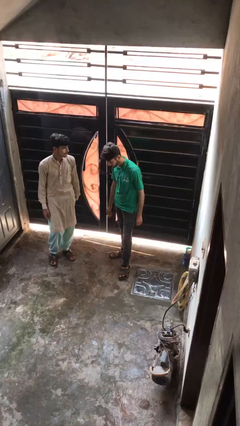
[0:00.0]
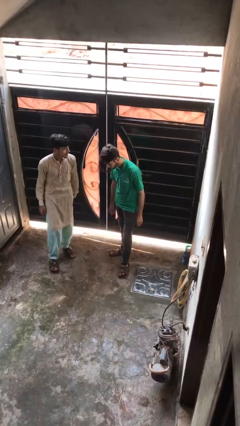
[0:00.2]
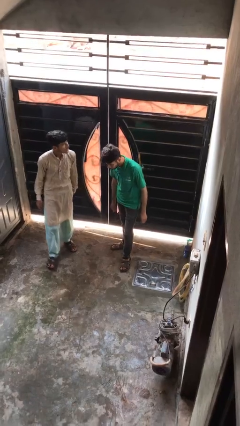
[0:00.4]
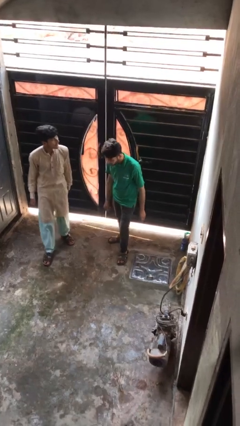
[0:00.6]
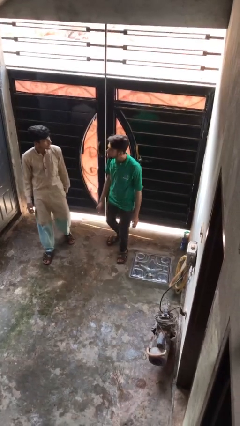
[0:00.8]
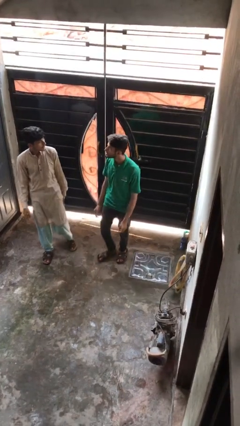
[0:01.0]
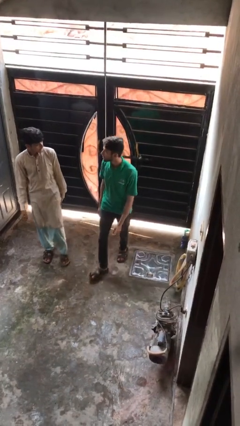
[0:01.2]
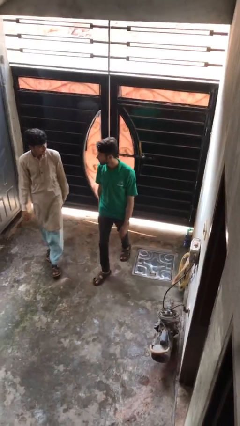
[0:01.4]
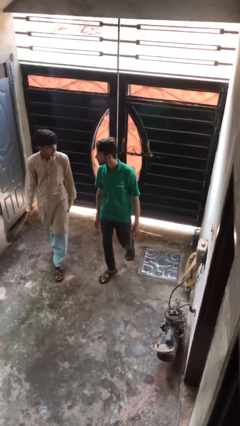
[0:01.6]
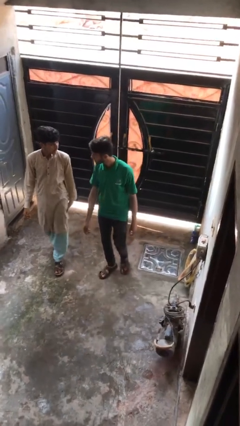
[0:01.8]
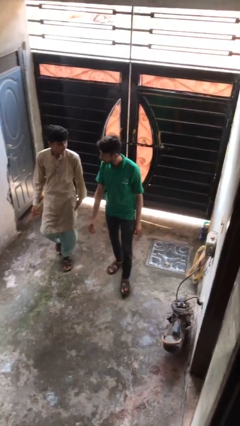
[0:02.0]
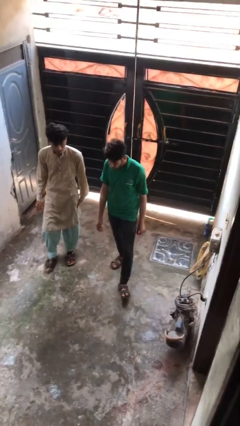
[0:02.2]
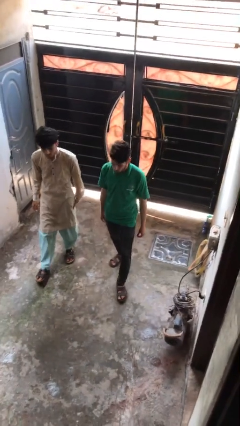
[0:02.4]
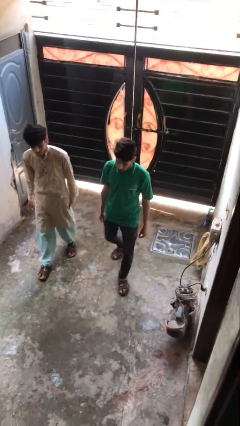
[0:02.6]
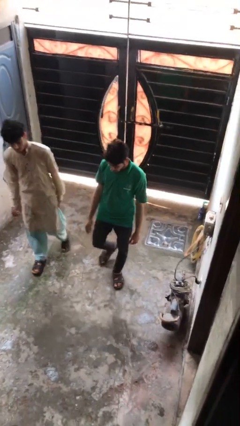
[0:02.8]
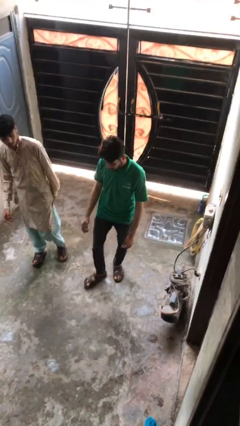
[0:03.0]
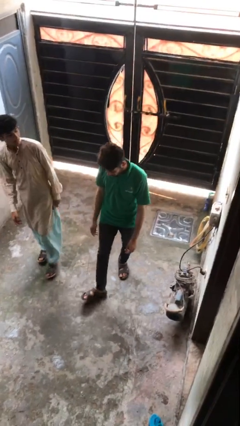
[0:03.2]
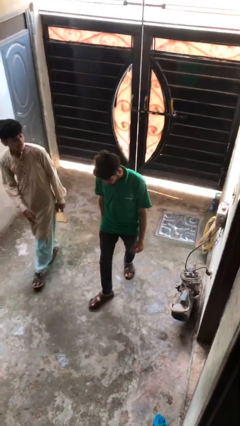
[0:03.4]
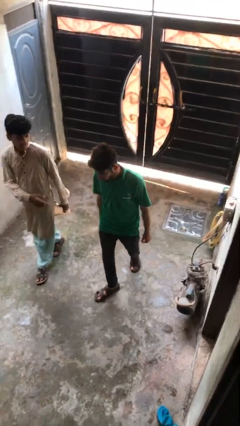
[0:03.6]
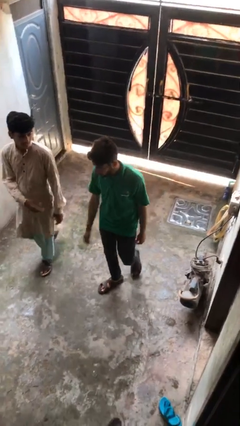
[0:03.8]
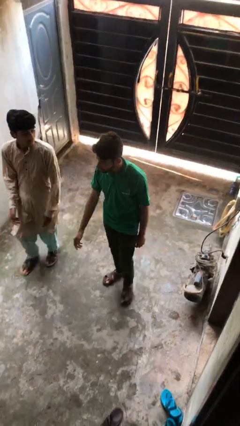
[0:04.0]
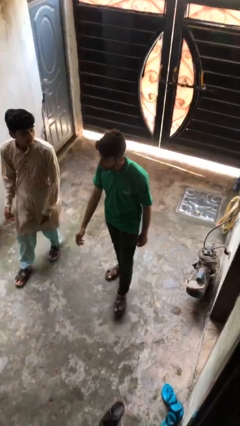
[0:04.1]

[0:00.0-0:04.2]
person talks to person

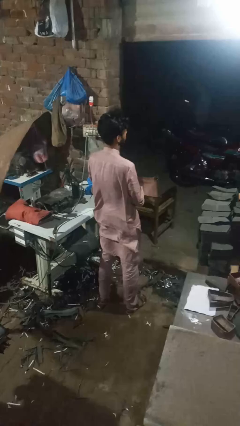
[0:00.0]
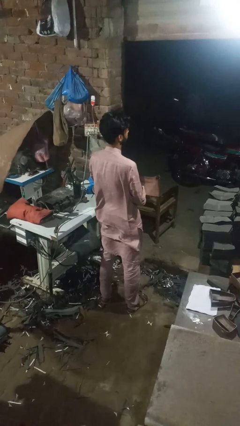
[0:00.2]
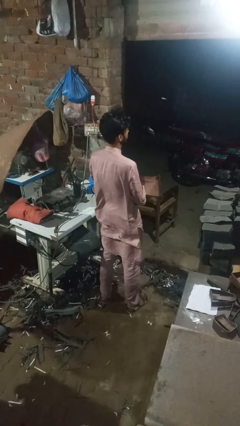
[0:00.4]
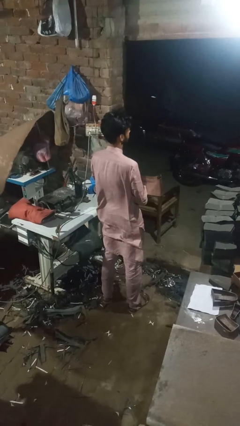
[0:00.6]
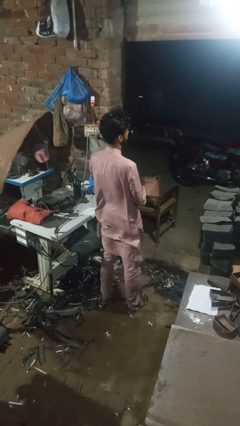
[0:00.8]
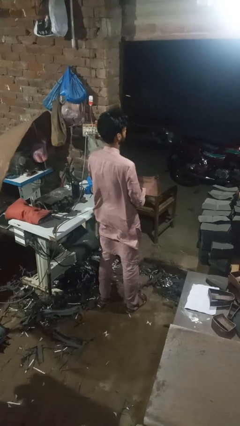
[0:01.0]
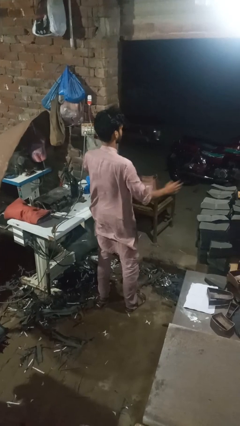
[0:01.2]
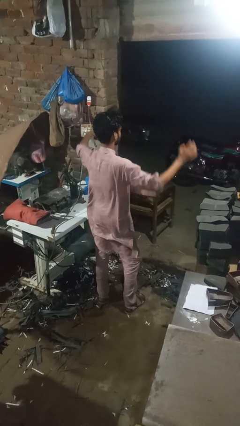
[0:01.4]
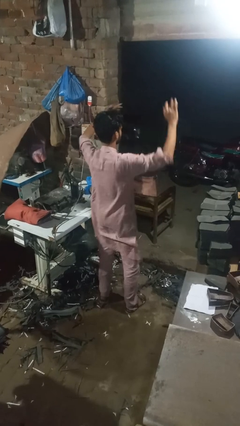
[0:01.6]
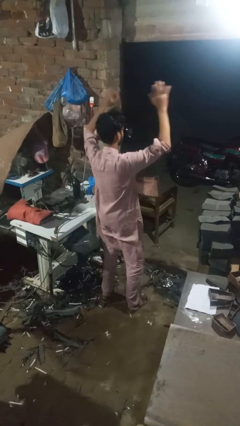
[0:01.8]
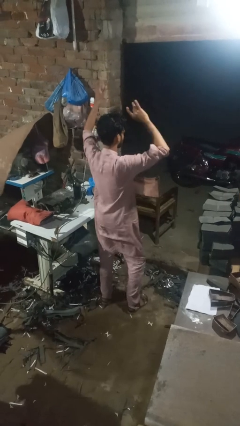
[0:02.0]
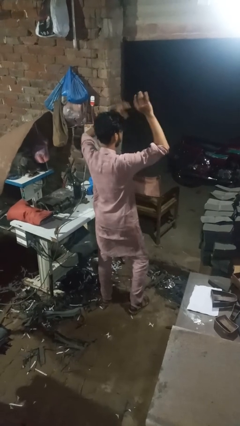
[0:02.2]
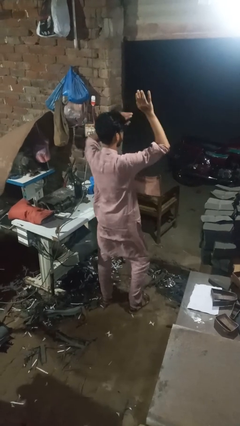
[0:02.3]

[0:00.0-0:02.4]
person dances in place

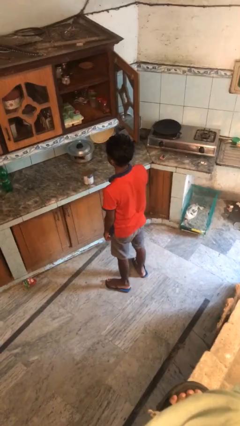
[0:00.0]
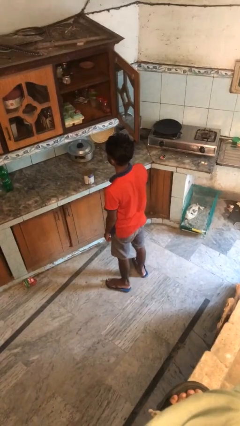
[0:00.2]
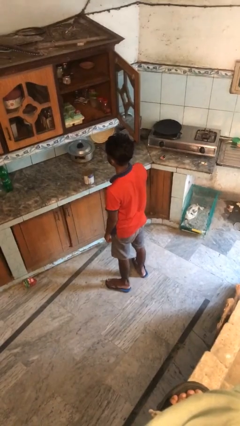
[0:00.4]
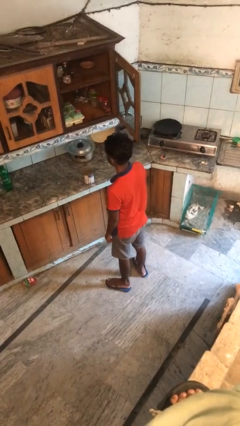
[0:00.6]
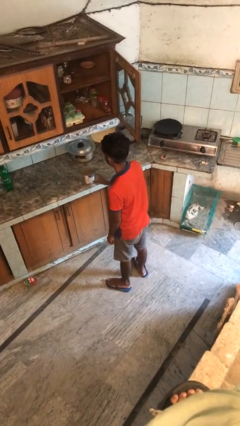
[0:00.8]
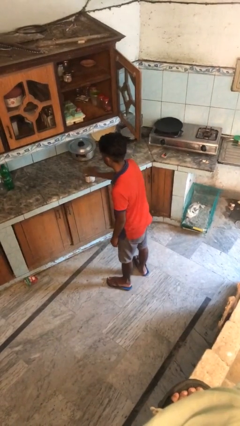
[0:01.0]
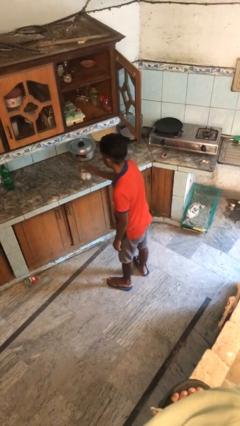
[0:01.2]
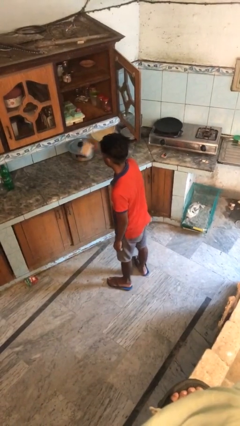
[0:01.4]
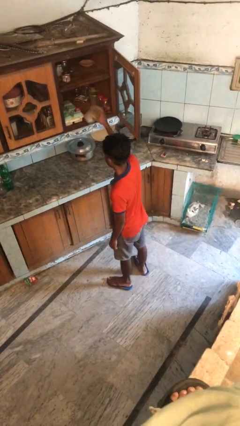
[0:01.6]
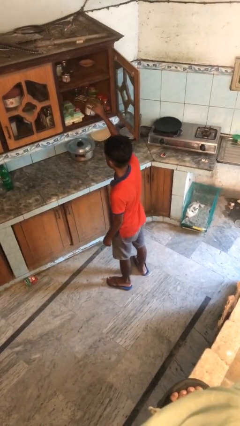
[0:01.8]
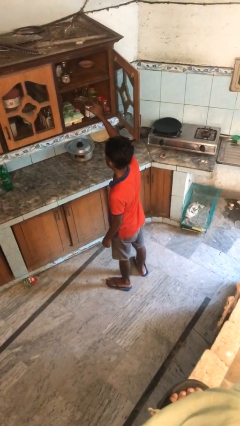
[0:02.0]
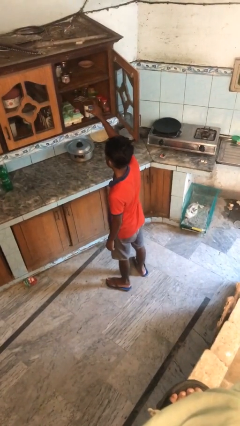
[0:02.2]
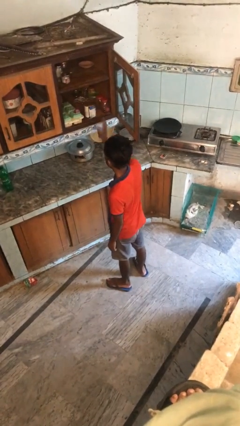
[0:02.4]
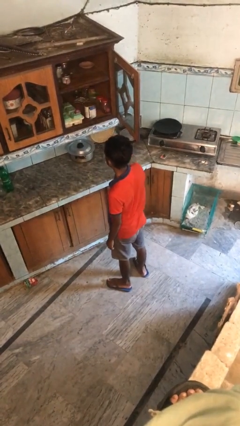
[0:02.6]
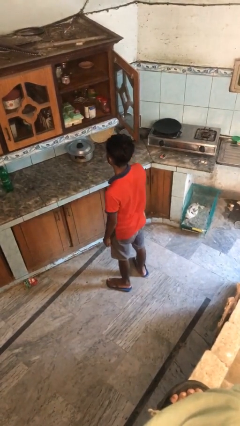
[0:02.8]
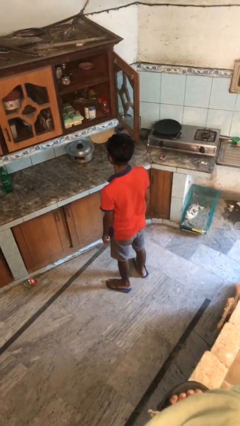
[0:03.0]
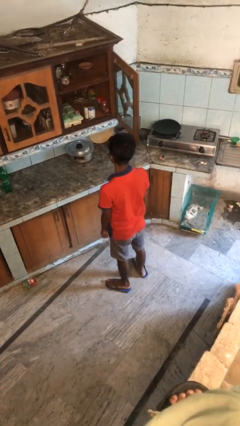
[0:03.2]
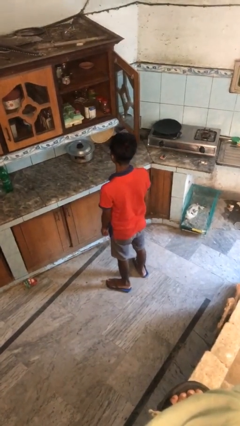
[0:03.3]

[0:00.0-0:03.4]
person puts object in cabinet

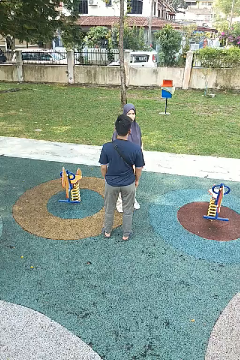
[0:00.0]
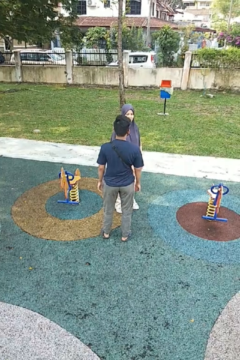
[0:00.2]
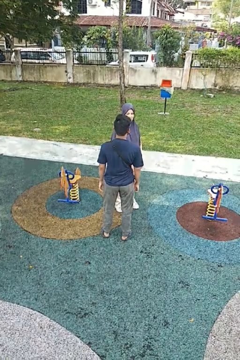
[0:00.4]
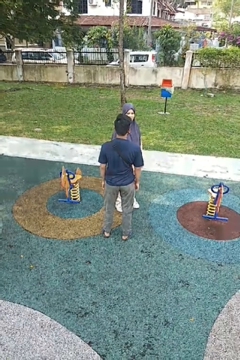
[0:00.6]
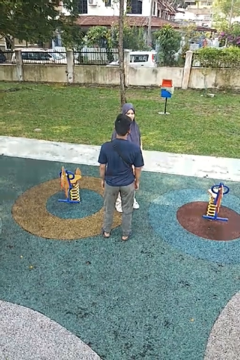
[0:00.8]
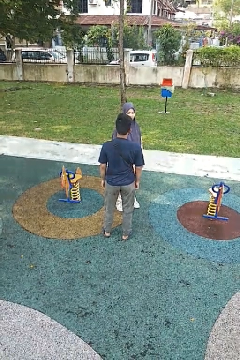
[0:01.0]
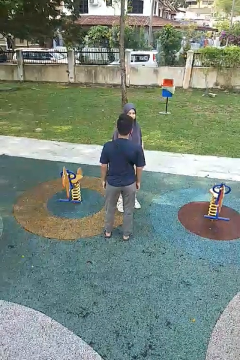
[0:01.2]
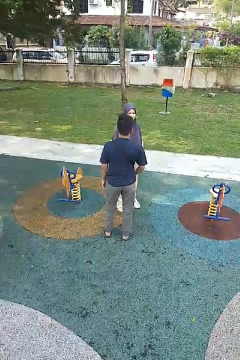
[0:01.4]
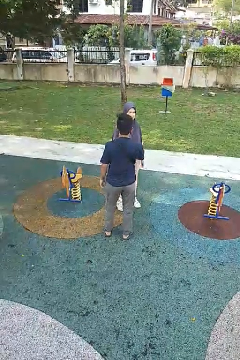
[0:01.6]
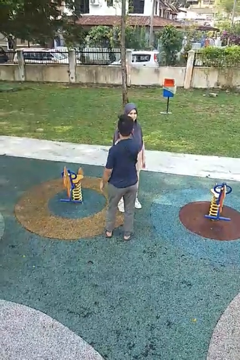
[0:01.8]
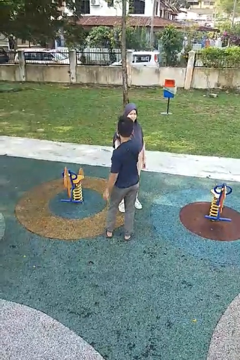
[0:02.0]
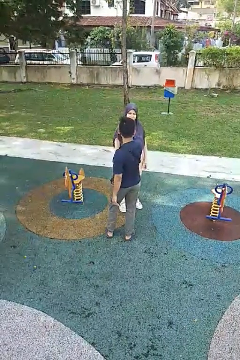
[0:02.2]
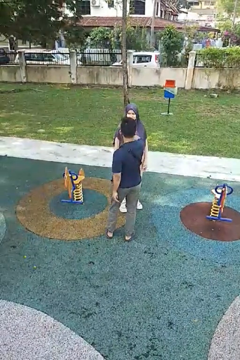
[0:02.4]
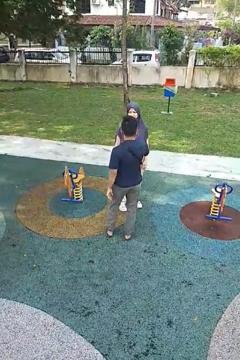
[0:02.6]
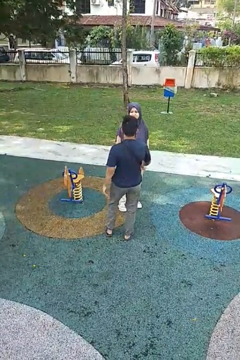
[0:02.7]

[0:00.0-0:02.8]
person shoves person

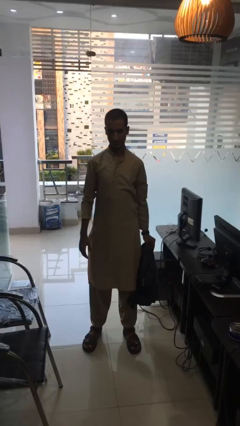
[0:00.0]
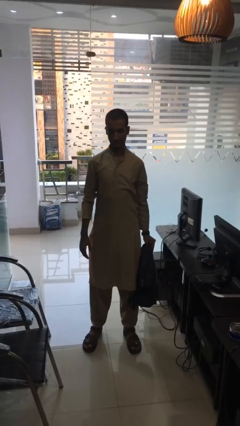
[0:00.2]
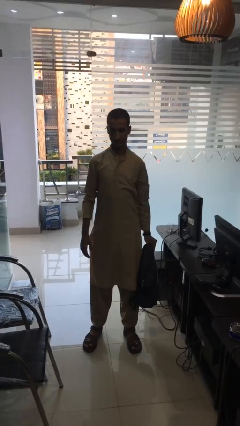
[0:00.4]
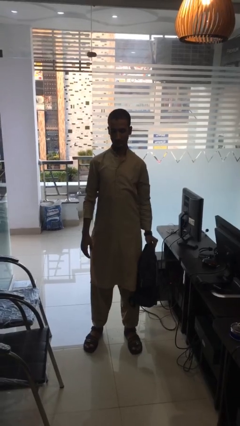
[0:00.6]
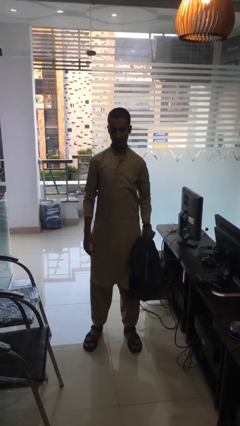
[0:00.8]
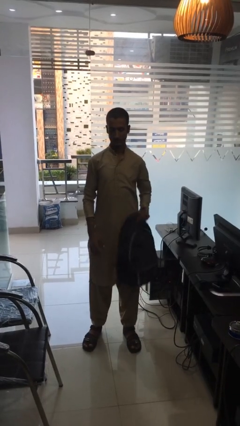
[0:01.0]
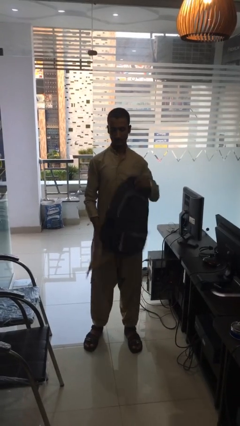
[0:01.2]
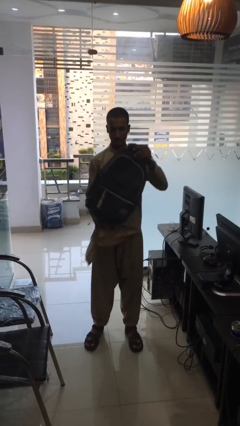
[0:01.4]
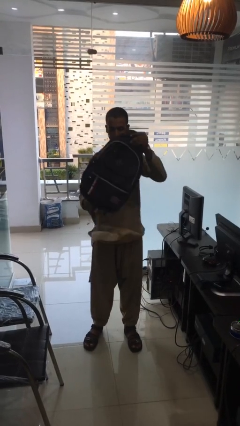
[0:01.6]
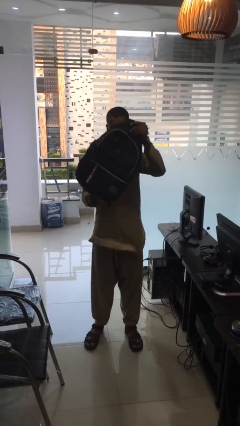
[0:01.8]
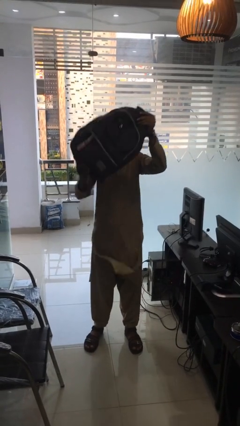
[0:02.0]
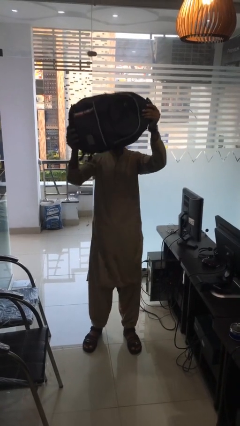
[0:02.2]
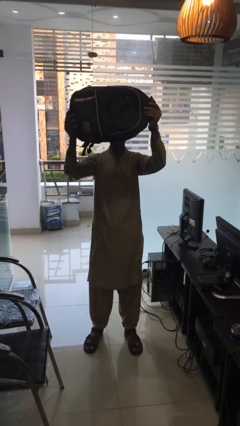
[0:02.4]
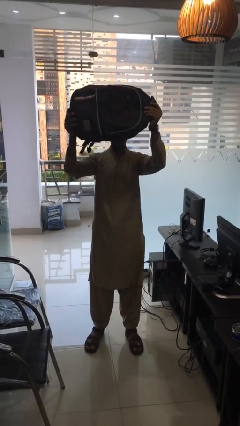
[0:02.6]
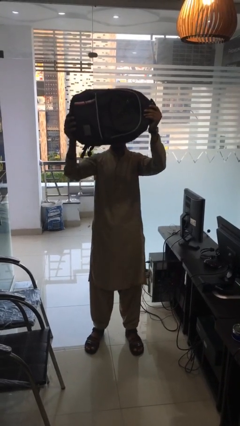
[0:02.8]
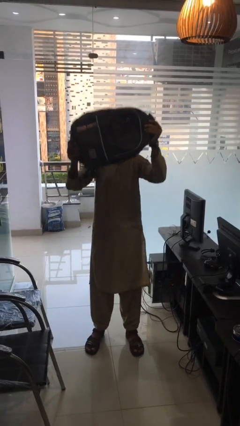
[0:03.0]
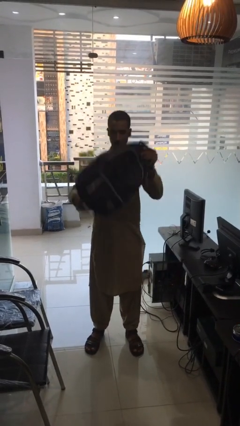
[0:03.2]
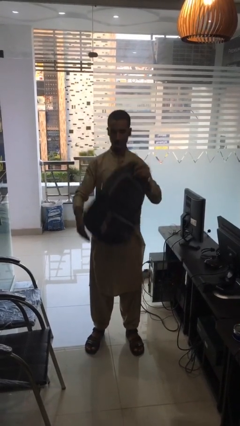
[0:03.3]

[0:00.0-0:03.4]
person holds object above head

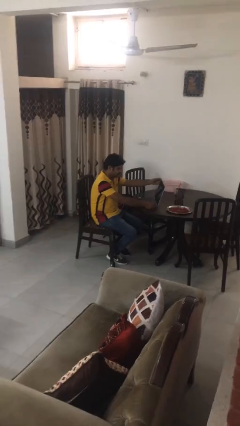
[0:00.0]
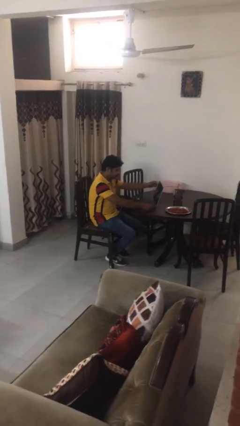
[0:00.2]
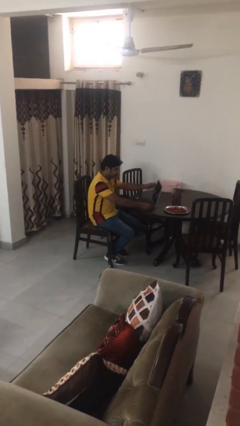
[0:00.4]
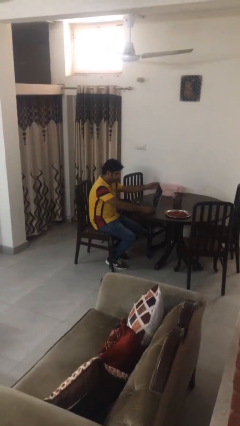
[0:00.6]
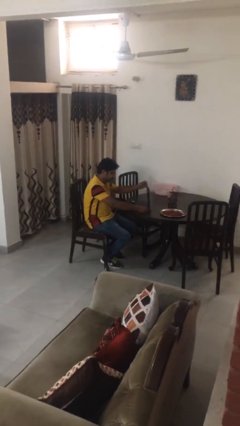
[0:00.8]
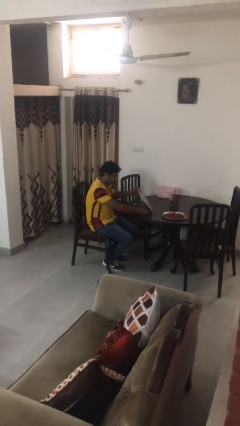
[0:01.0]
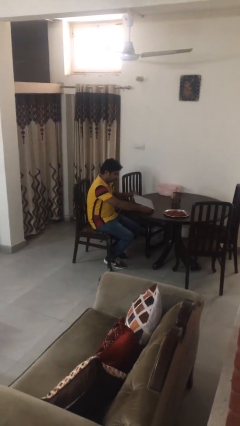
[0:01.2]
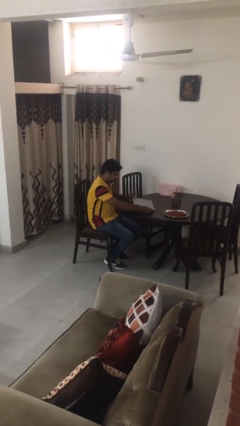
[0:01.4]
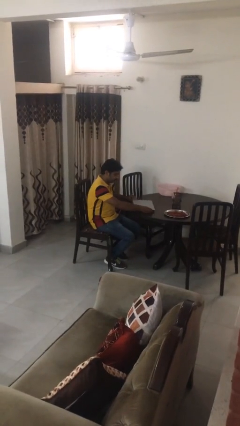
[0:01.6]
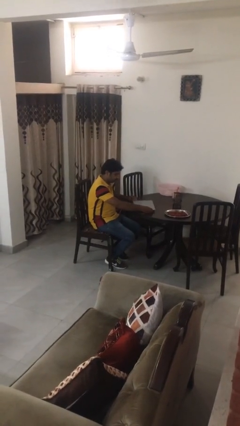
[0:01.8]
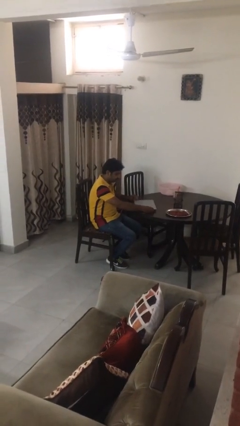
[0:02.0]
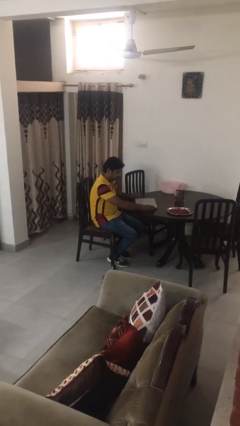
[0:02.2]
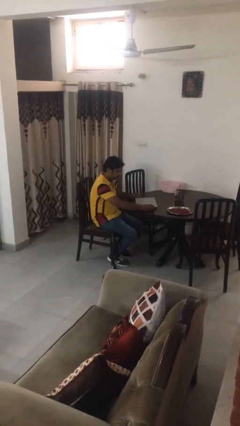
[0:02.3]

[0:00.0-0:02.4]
person closes laptop
